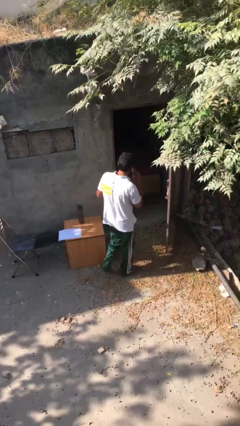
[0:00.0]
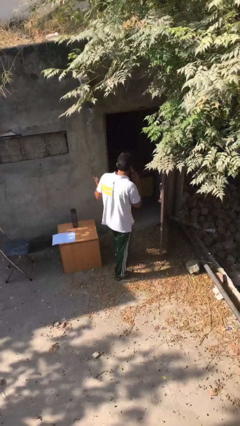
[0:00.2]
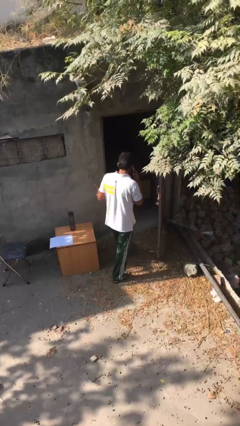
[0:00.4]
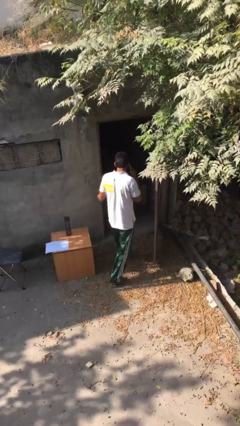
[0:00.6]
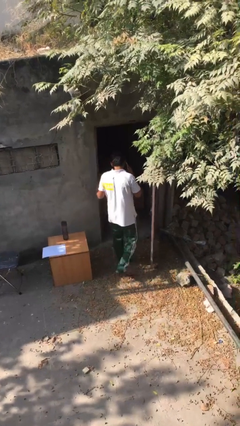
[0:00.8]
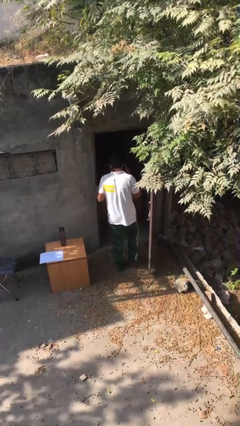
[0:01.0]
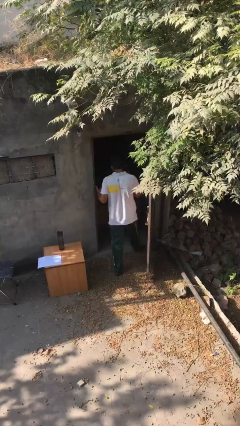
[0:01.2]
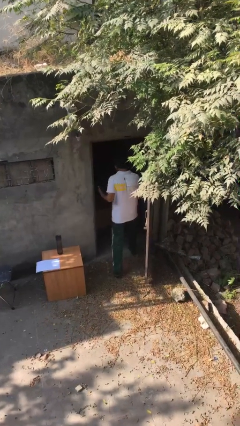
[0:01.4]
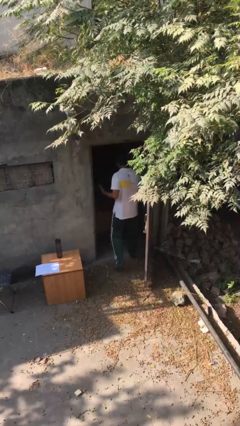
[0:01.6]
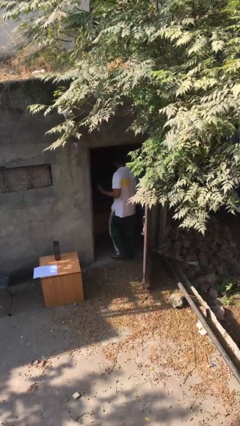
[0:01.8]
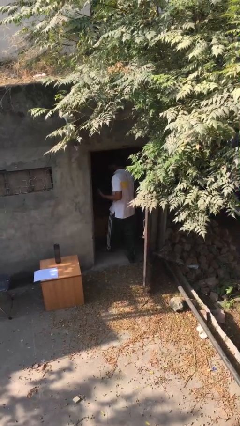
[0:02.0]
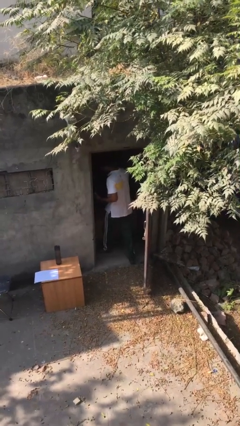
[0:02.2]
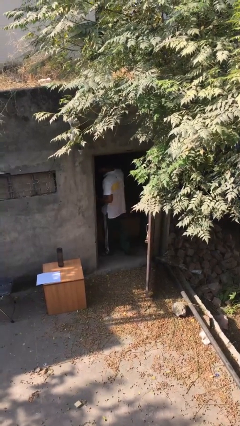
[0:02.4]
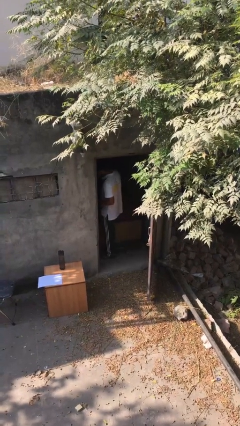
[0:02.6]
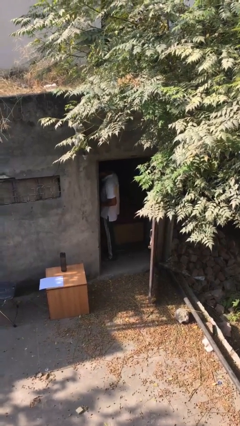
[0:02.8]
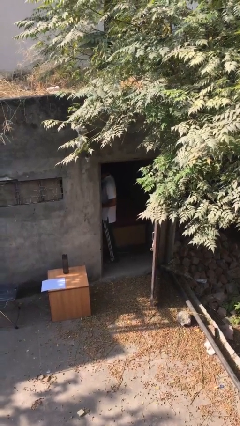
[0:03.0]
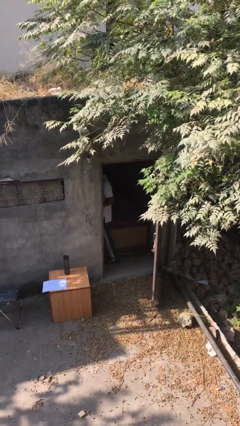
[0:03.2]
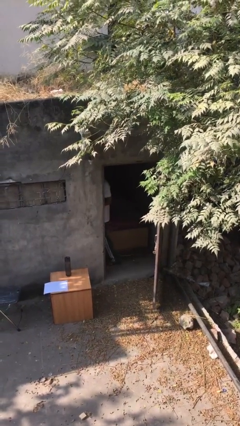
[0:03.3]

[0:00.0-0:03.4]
person exits scene through structure

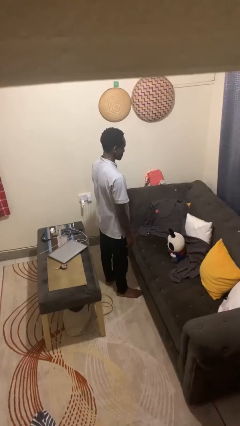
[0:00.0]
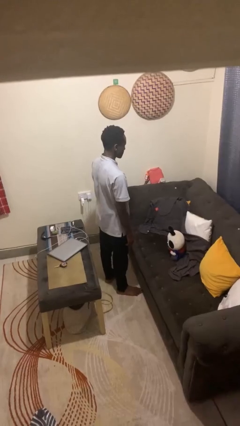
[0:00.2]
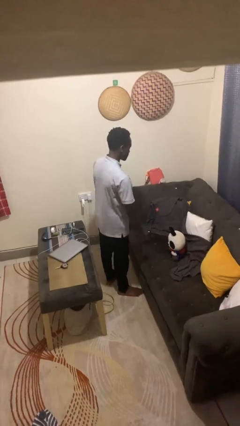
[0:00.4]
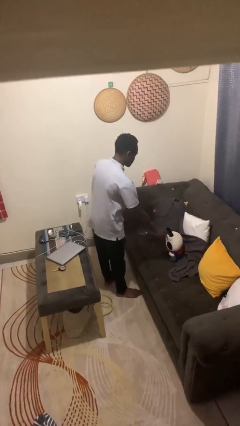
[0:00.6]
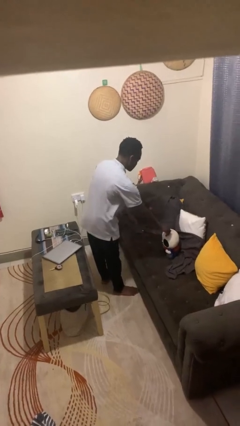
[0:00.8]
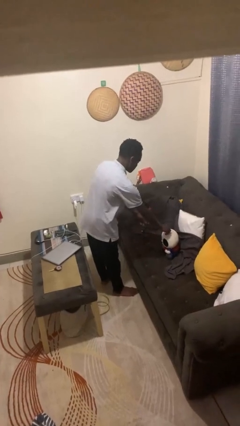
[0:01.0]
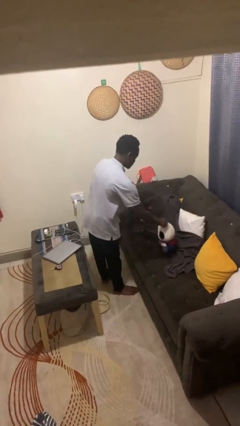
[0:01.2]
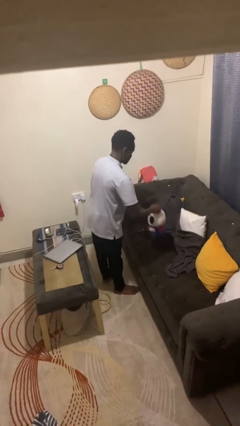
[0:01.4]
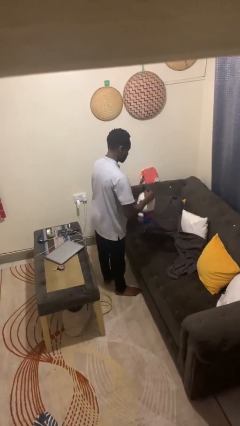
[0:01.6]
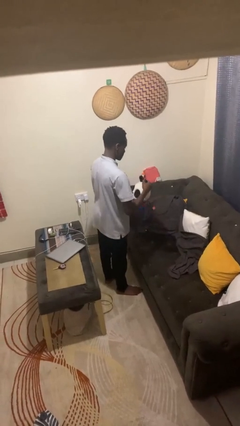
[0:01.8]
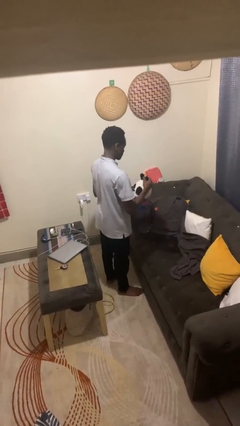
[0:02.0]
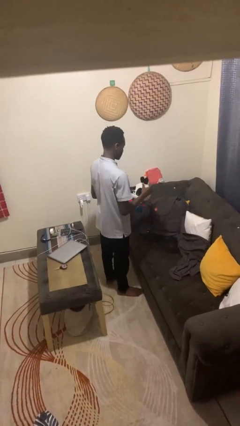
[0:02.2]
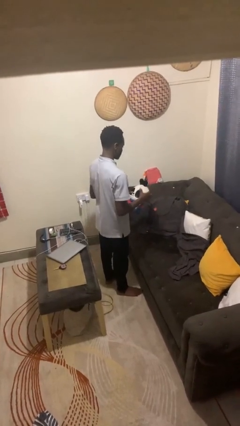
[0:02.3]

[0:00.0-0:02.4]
person picks up object from couch

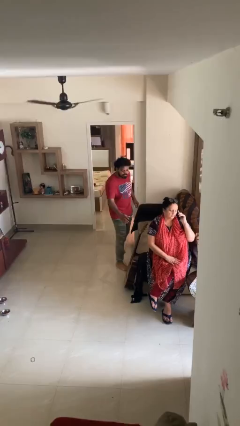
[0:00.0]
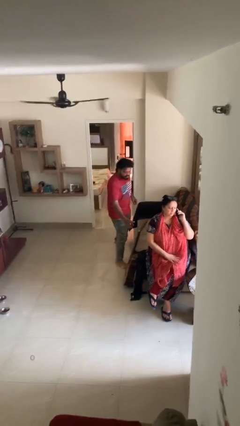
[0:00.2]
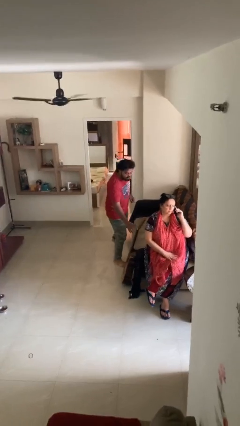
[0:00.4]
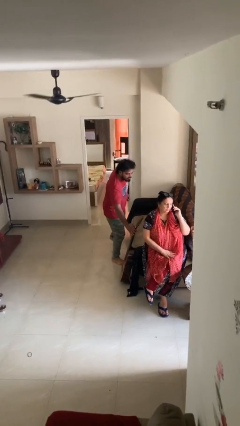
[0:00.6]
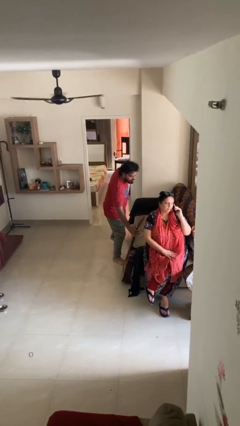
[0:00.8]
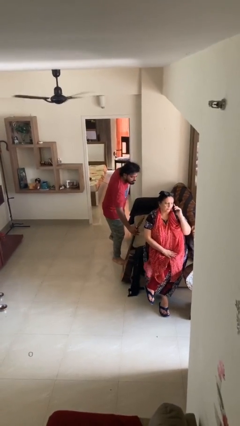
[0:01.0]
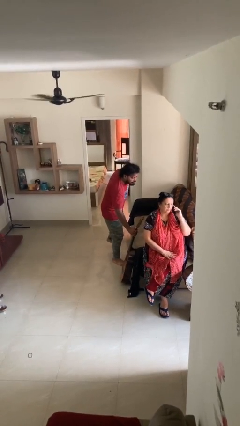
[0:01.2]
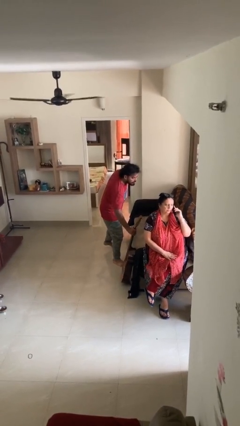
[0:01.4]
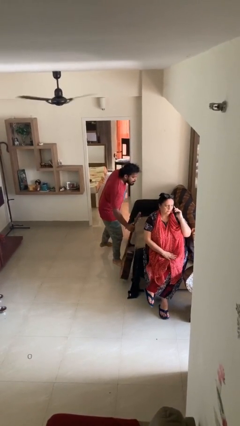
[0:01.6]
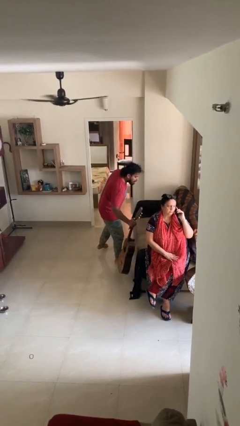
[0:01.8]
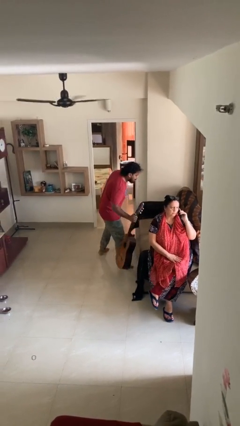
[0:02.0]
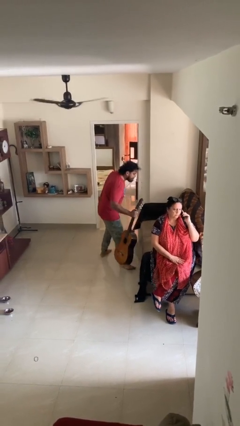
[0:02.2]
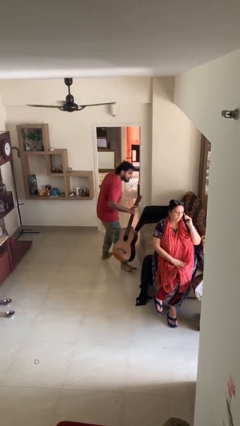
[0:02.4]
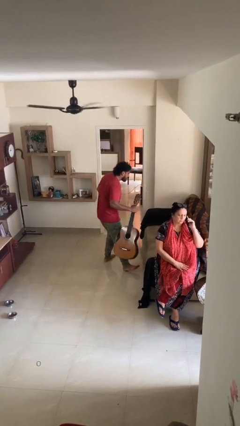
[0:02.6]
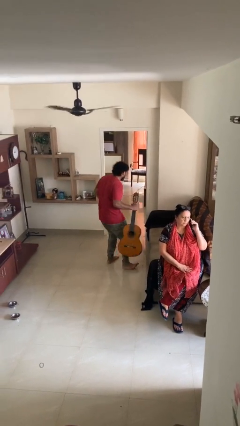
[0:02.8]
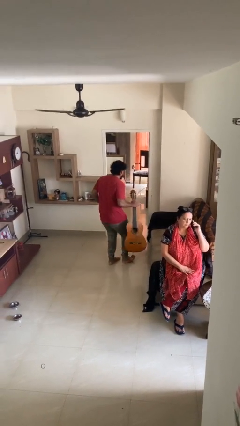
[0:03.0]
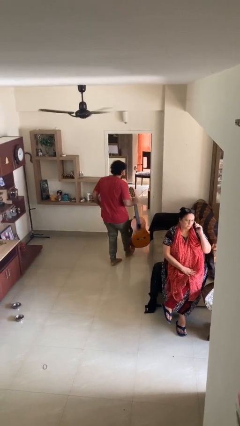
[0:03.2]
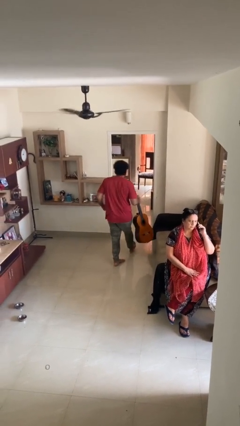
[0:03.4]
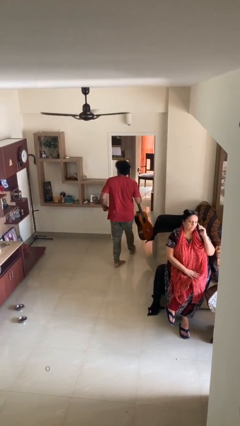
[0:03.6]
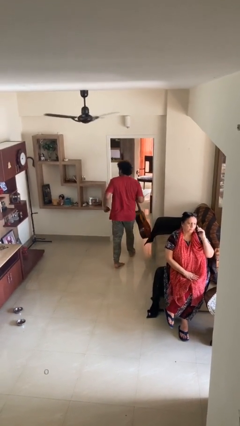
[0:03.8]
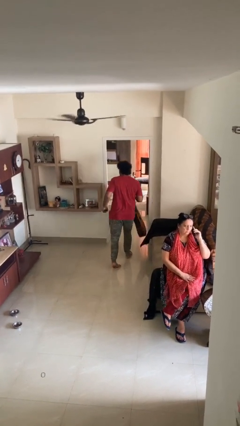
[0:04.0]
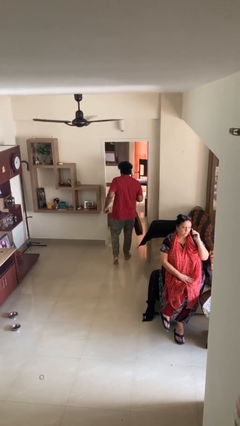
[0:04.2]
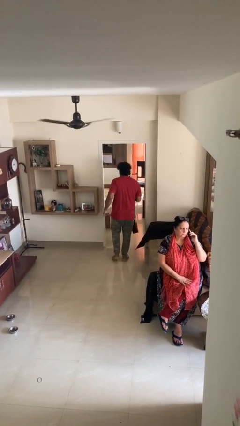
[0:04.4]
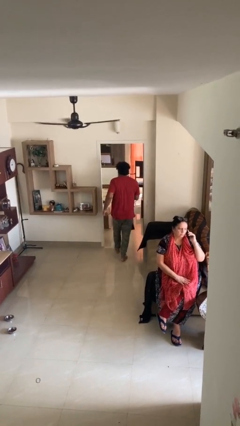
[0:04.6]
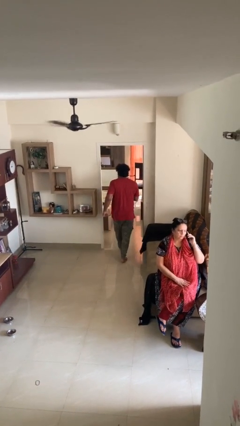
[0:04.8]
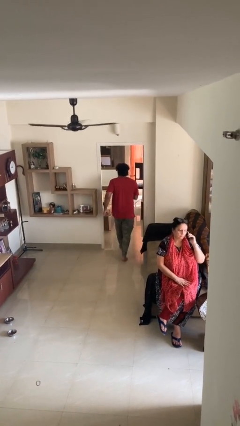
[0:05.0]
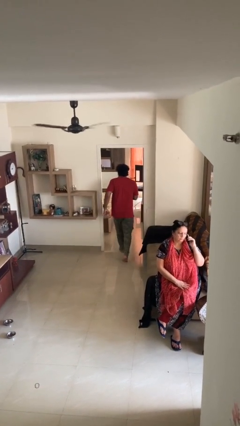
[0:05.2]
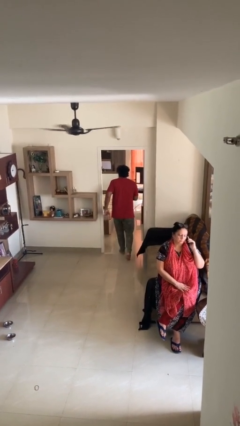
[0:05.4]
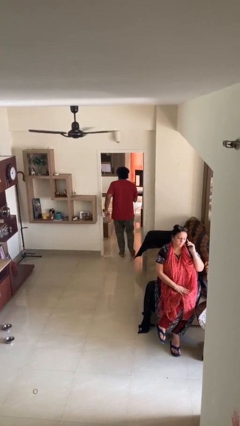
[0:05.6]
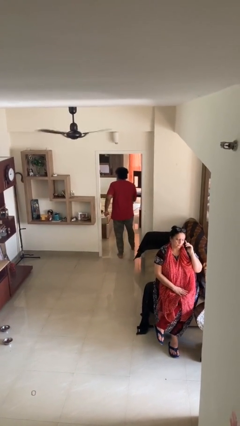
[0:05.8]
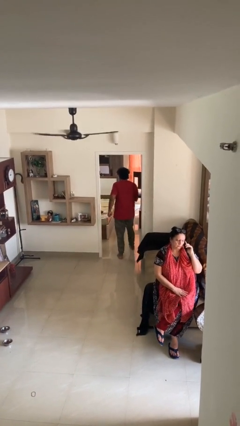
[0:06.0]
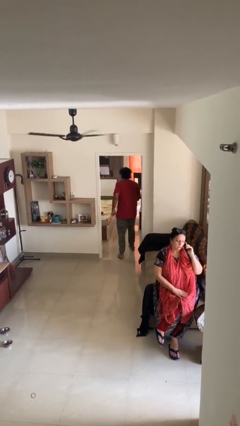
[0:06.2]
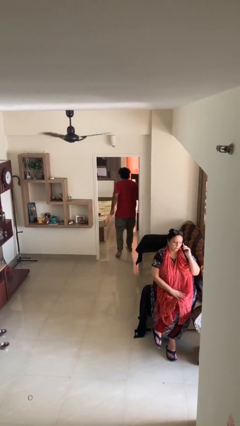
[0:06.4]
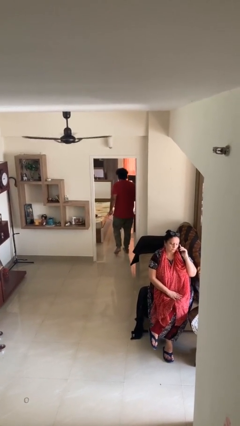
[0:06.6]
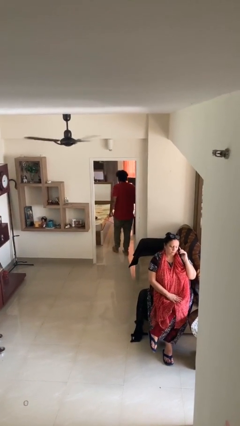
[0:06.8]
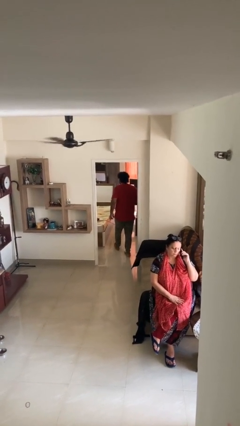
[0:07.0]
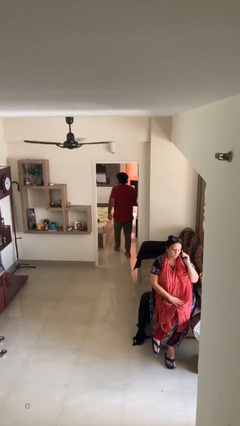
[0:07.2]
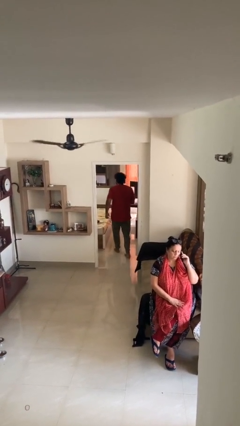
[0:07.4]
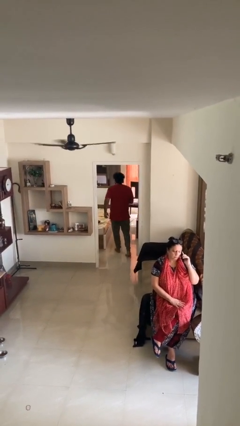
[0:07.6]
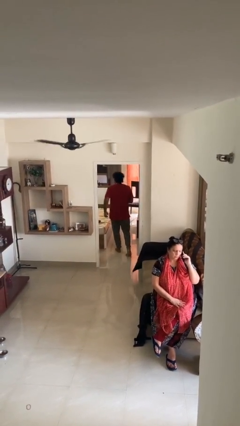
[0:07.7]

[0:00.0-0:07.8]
person steals object from person

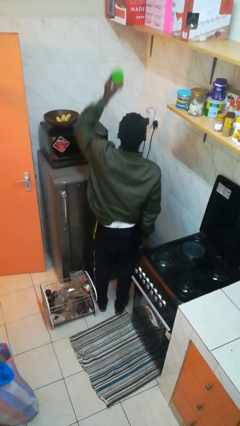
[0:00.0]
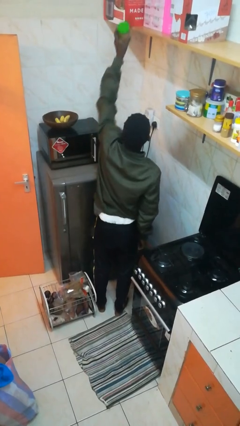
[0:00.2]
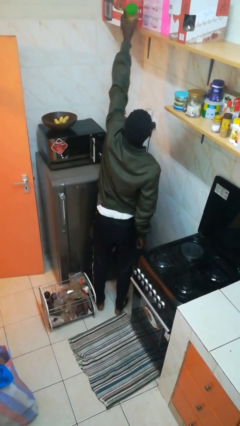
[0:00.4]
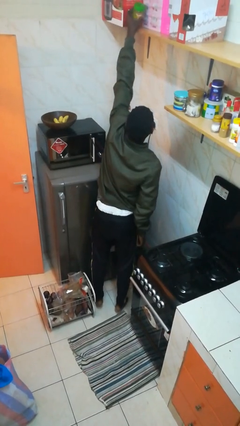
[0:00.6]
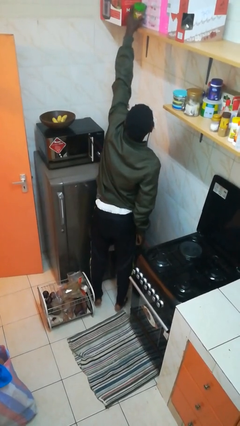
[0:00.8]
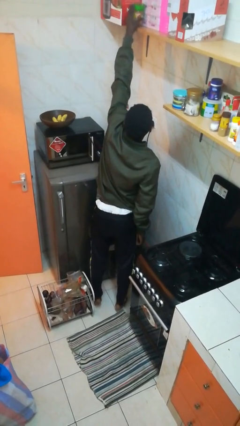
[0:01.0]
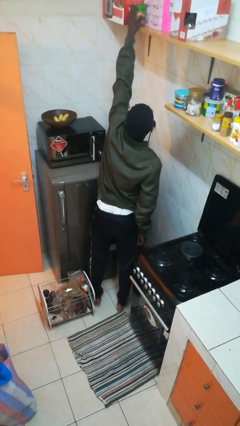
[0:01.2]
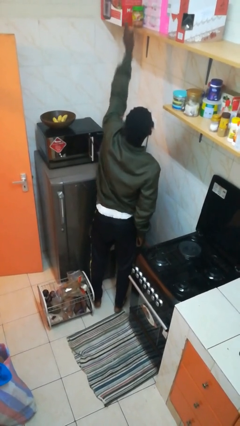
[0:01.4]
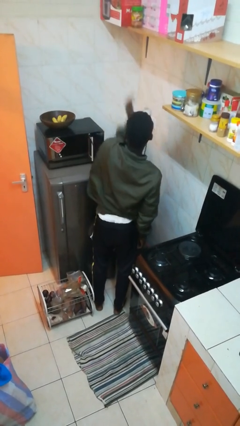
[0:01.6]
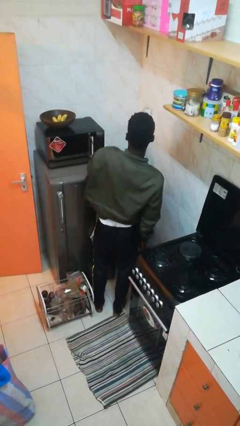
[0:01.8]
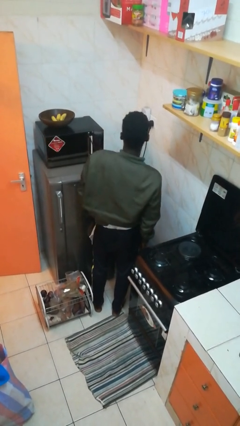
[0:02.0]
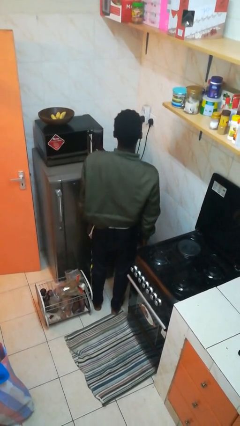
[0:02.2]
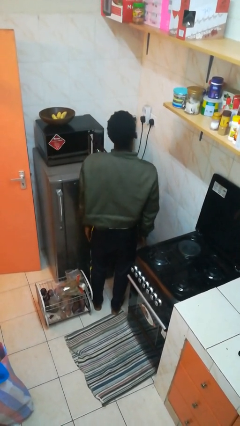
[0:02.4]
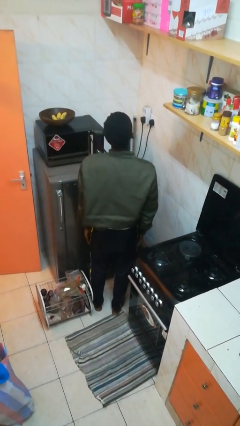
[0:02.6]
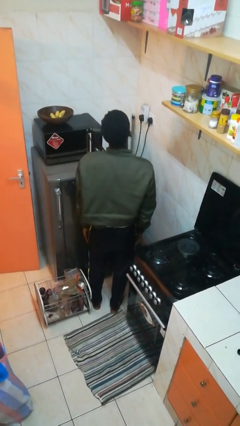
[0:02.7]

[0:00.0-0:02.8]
person puts down object on shelf

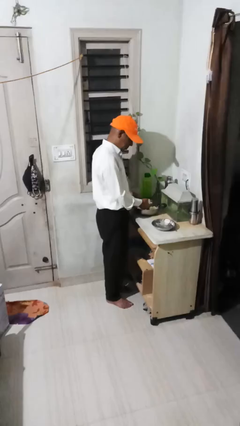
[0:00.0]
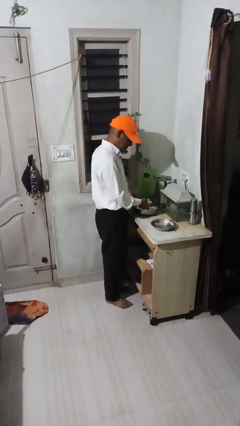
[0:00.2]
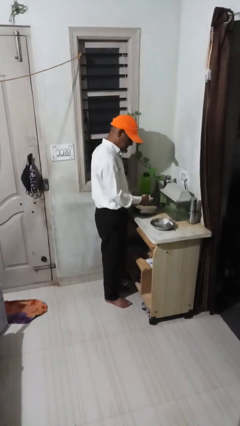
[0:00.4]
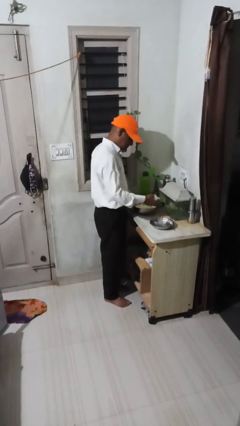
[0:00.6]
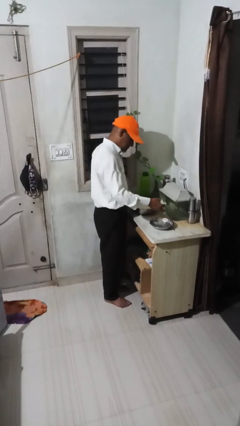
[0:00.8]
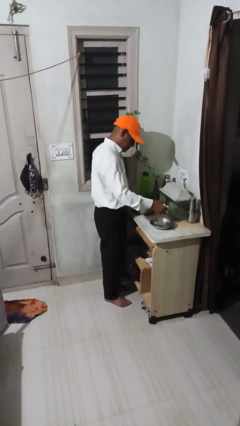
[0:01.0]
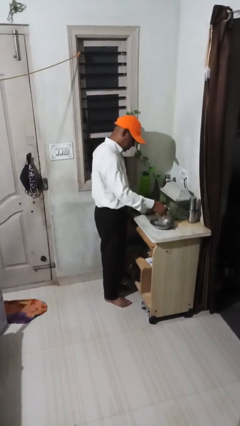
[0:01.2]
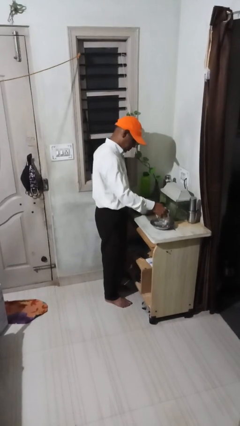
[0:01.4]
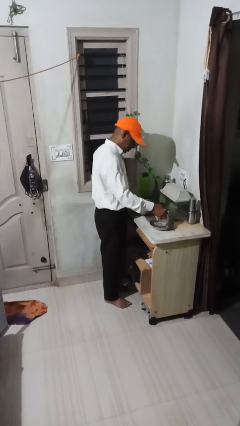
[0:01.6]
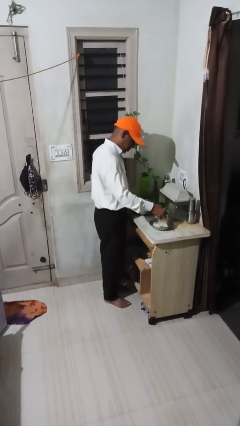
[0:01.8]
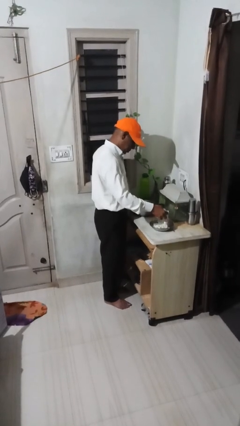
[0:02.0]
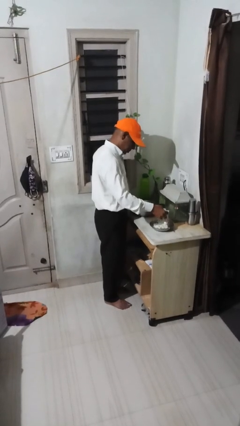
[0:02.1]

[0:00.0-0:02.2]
person pours into bowl
